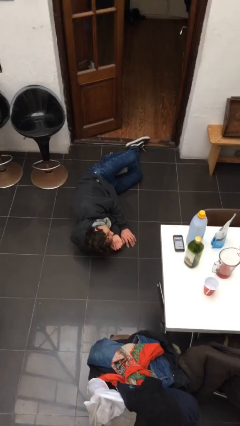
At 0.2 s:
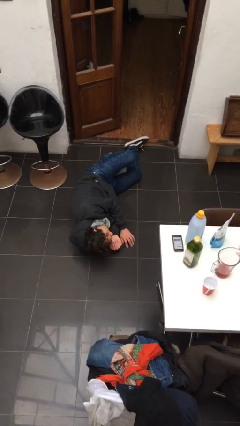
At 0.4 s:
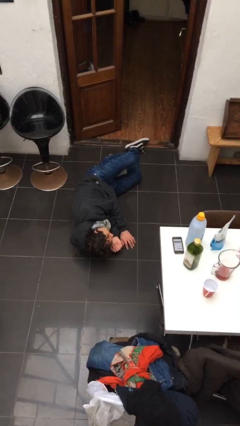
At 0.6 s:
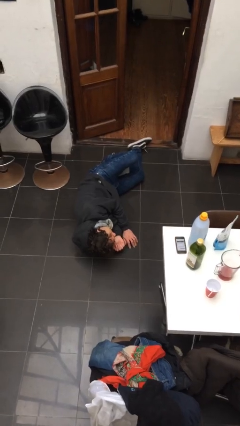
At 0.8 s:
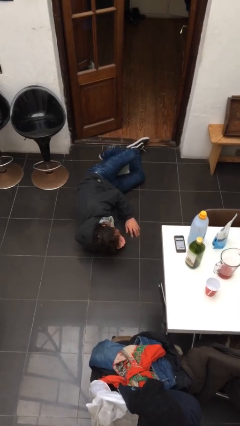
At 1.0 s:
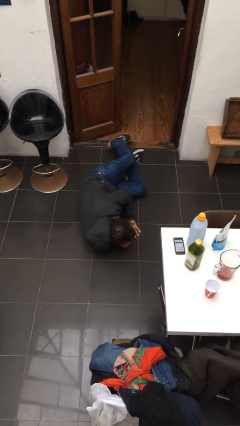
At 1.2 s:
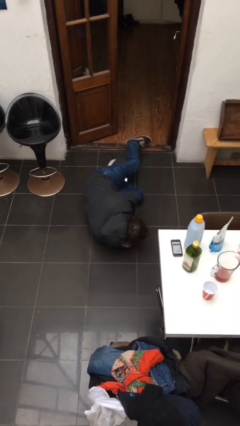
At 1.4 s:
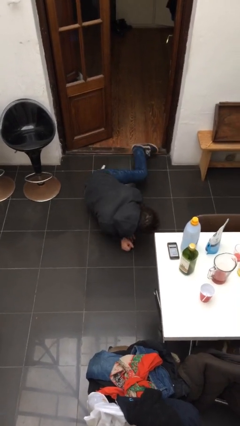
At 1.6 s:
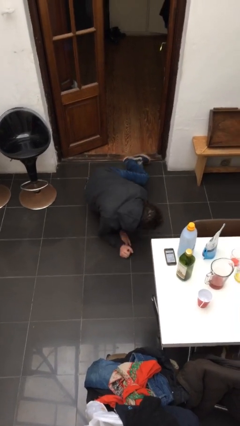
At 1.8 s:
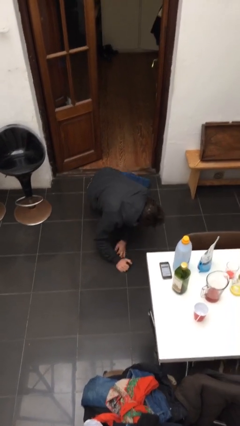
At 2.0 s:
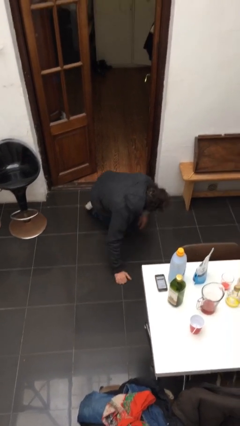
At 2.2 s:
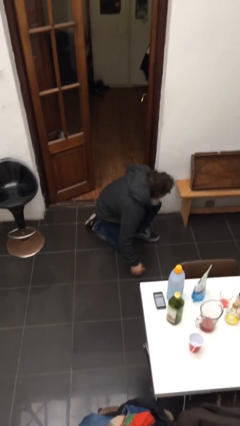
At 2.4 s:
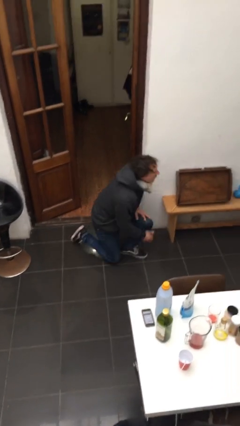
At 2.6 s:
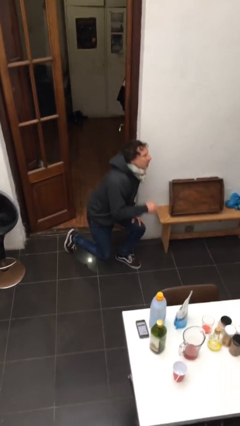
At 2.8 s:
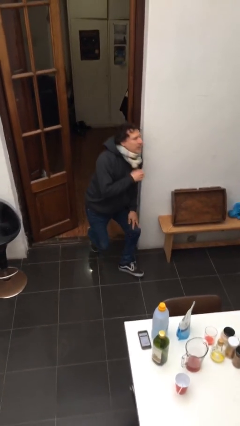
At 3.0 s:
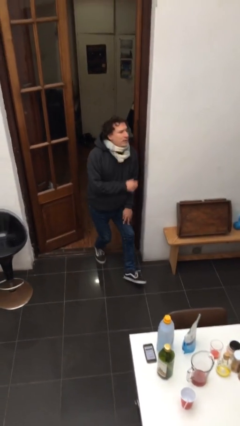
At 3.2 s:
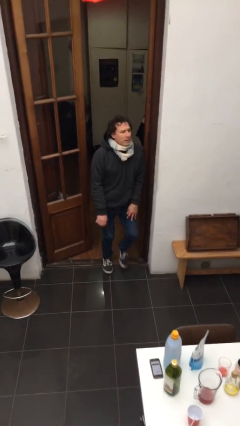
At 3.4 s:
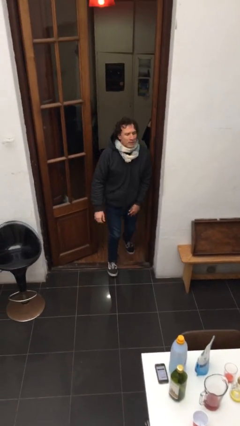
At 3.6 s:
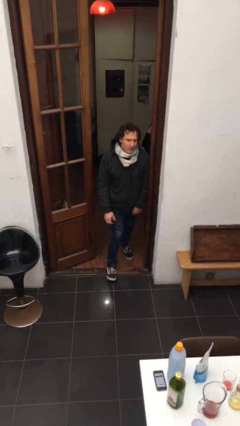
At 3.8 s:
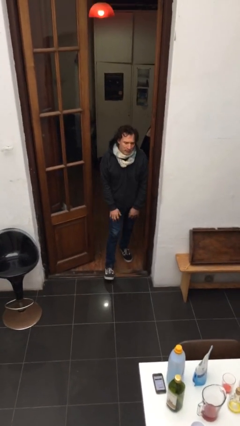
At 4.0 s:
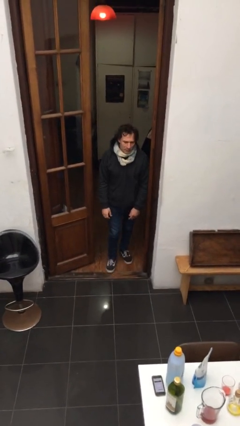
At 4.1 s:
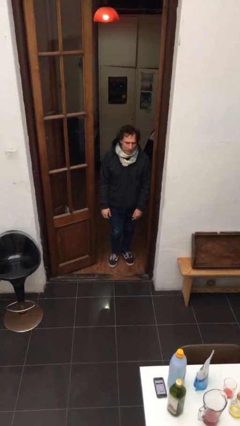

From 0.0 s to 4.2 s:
person stands up from floor

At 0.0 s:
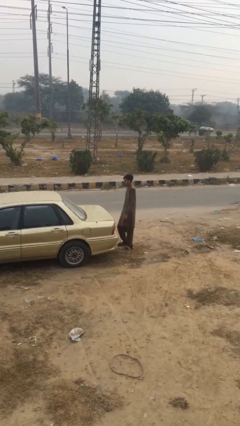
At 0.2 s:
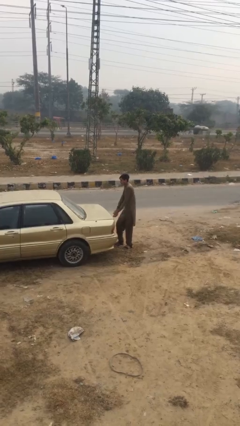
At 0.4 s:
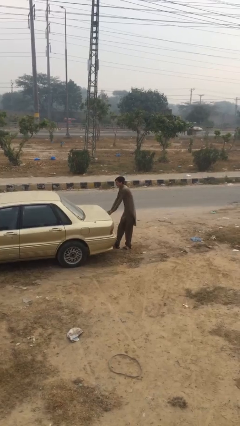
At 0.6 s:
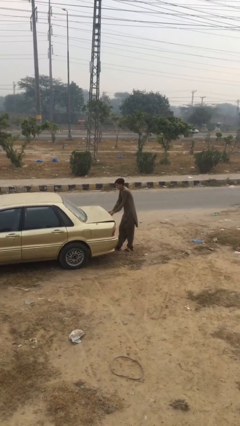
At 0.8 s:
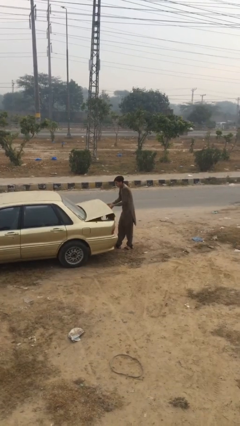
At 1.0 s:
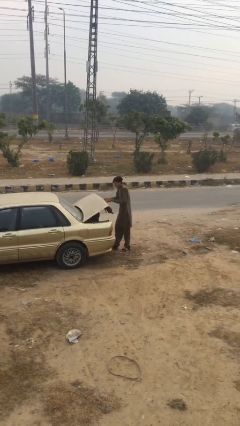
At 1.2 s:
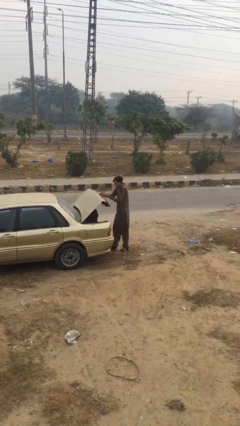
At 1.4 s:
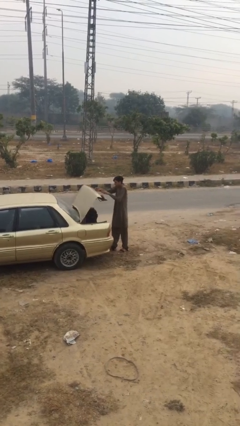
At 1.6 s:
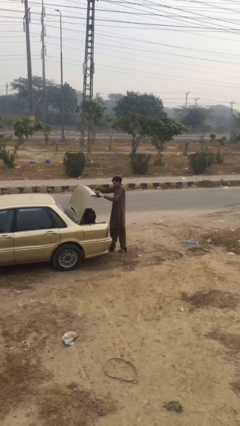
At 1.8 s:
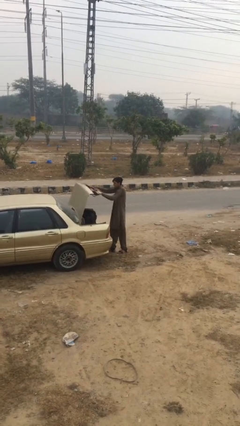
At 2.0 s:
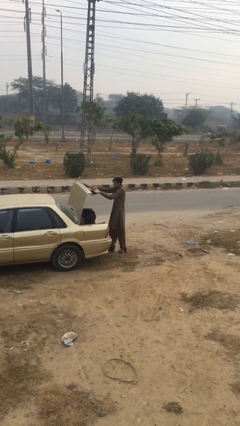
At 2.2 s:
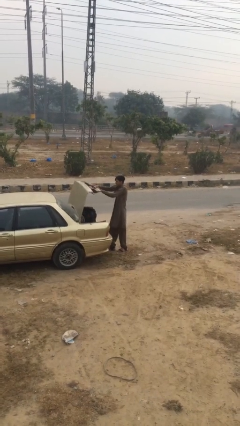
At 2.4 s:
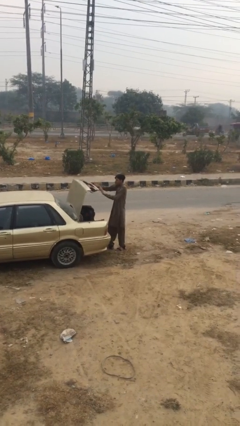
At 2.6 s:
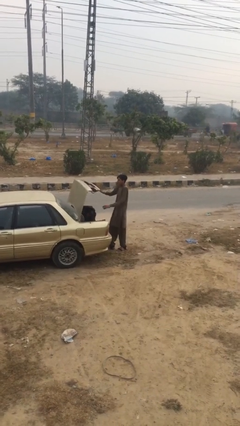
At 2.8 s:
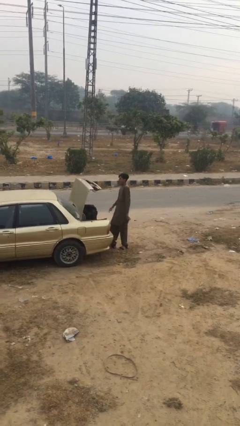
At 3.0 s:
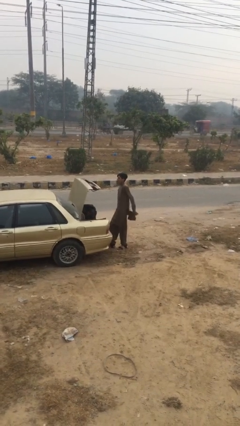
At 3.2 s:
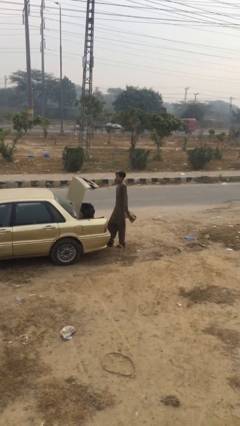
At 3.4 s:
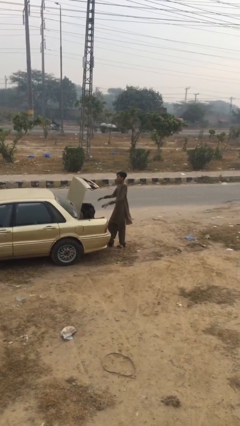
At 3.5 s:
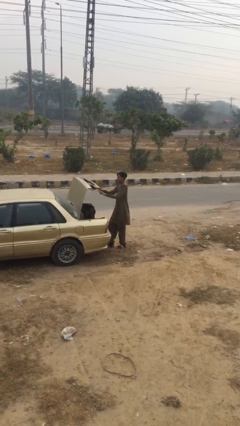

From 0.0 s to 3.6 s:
person opens car trunk

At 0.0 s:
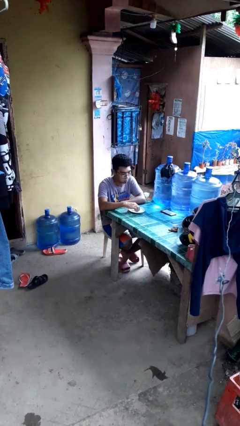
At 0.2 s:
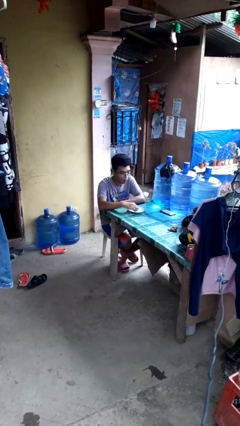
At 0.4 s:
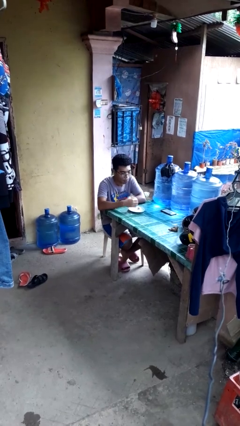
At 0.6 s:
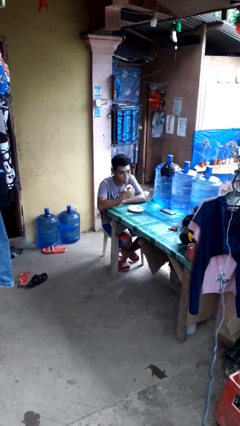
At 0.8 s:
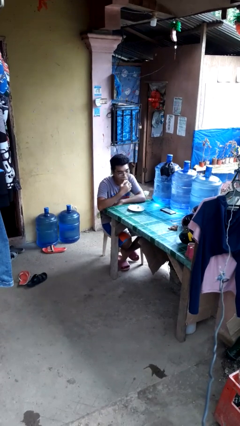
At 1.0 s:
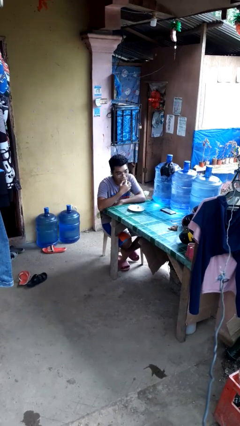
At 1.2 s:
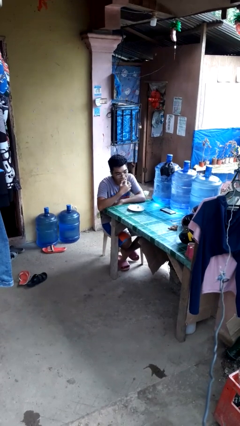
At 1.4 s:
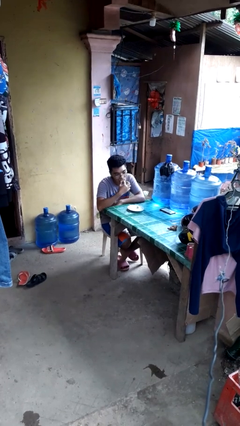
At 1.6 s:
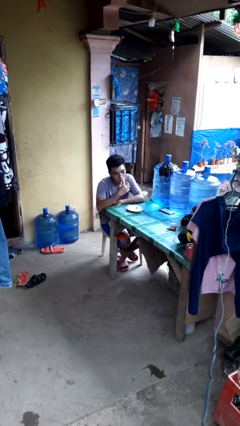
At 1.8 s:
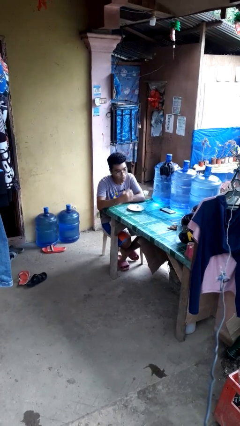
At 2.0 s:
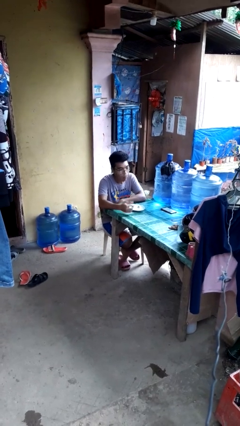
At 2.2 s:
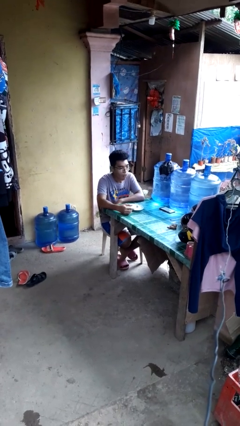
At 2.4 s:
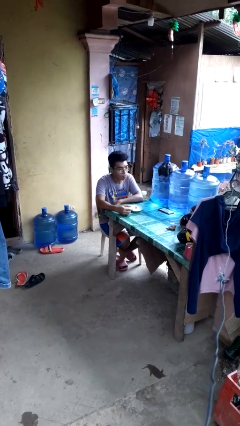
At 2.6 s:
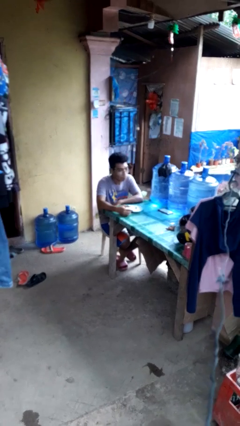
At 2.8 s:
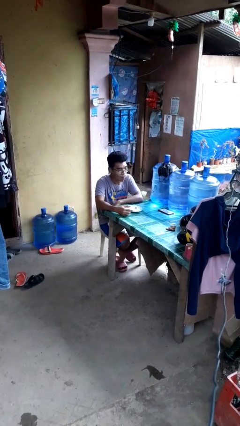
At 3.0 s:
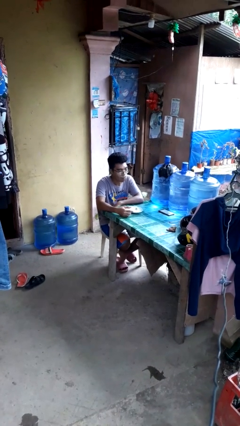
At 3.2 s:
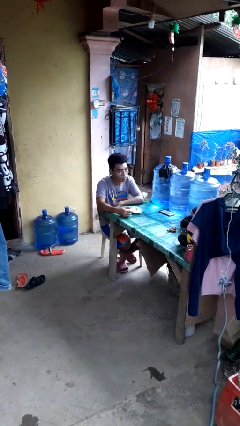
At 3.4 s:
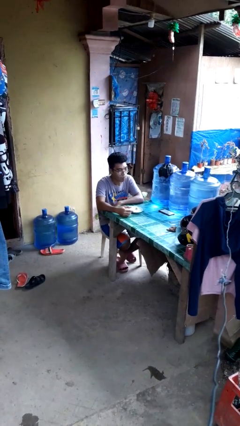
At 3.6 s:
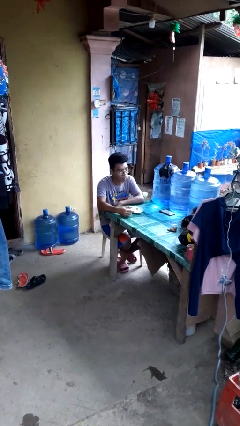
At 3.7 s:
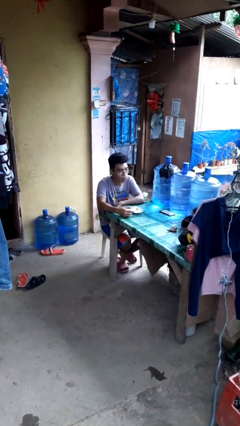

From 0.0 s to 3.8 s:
person eats with hands

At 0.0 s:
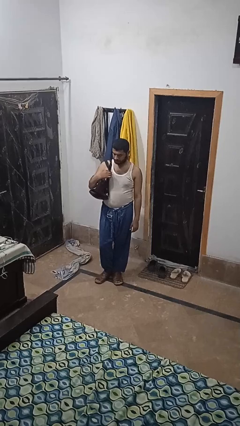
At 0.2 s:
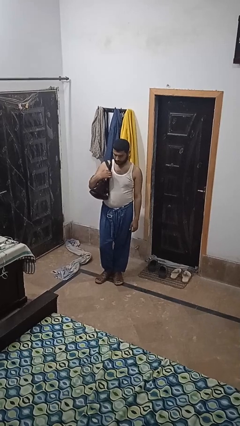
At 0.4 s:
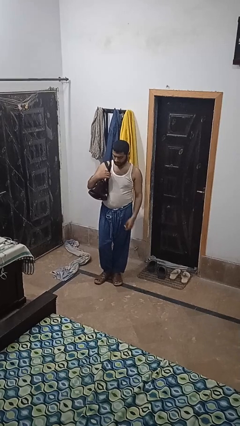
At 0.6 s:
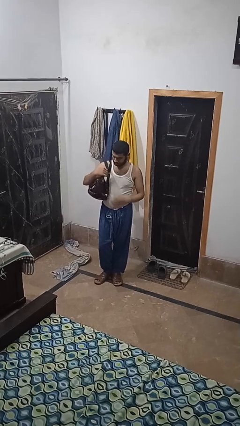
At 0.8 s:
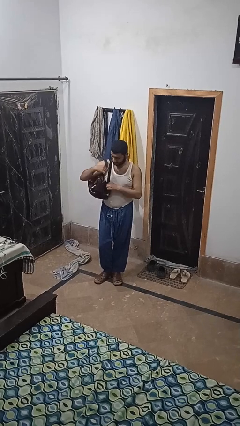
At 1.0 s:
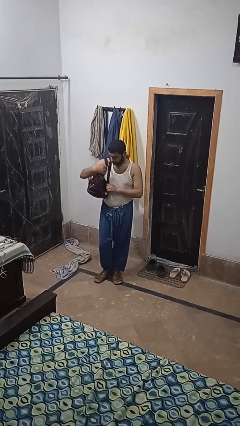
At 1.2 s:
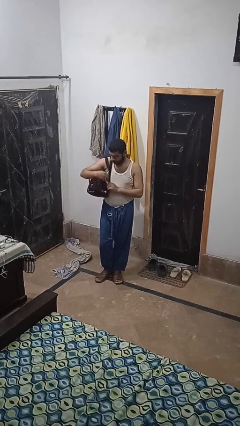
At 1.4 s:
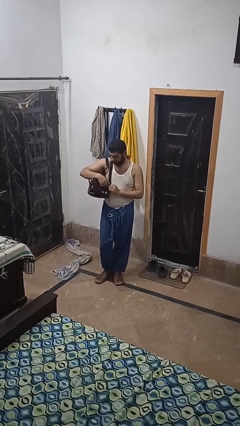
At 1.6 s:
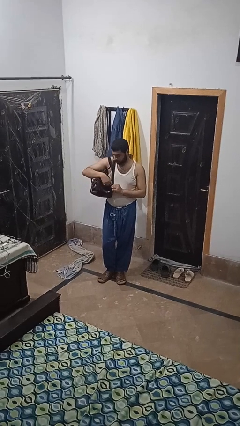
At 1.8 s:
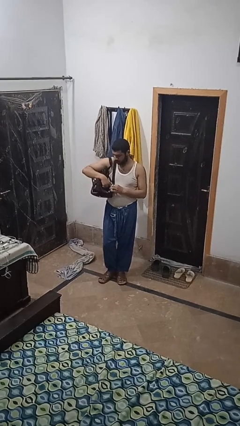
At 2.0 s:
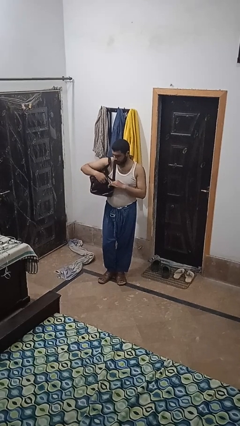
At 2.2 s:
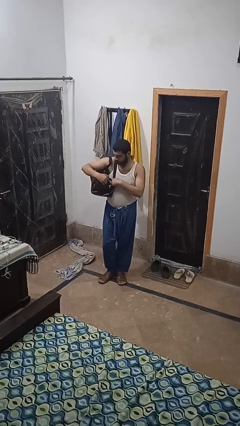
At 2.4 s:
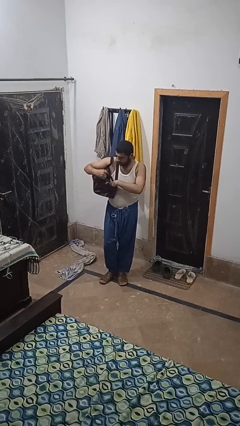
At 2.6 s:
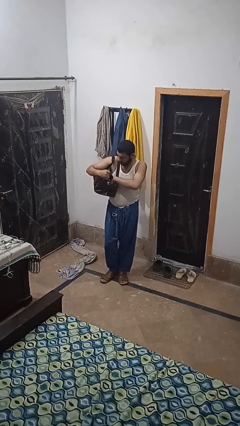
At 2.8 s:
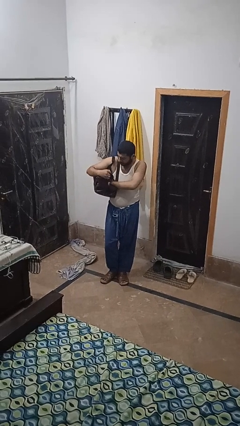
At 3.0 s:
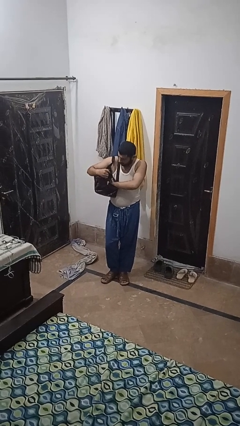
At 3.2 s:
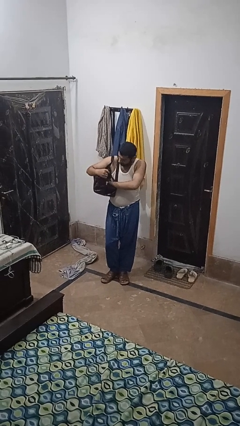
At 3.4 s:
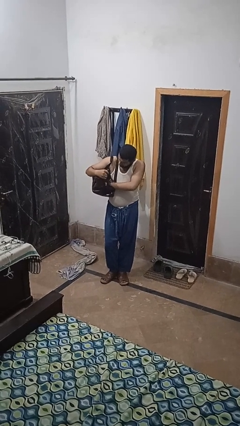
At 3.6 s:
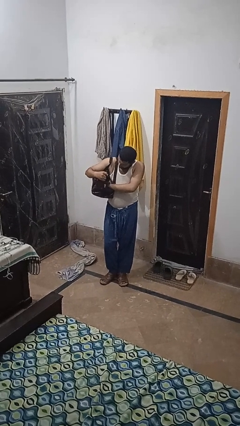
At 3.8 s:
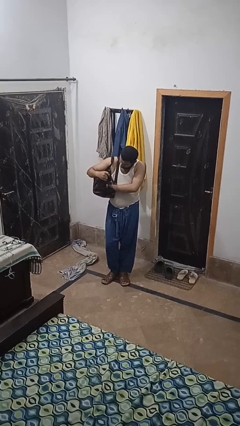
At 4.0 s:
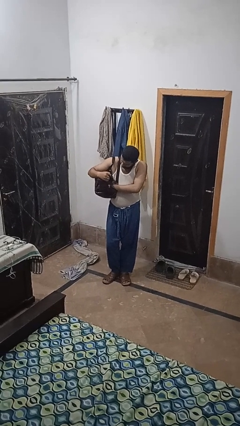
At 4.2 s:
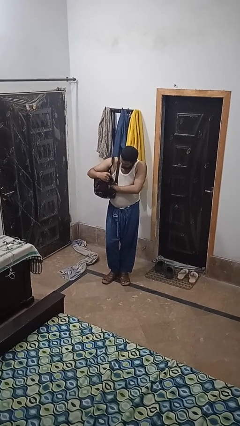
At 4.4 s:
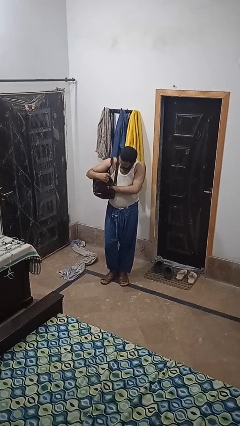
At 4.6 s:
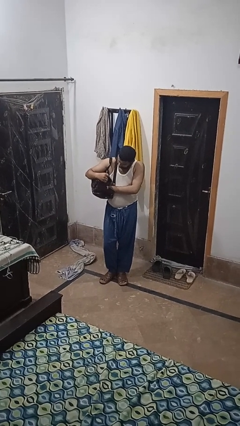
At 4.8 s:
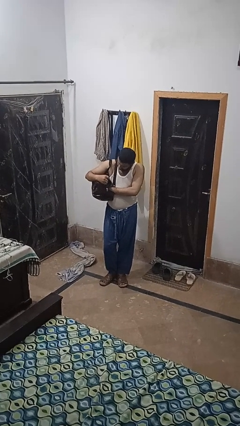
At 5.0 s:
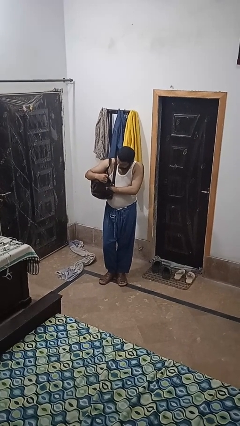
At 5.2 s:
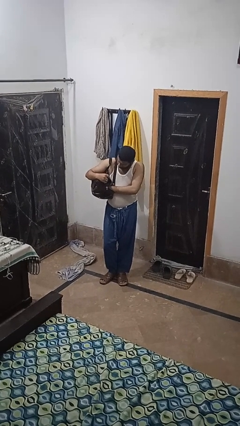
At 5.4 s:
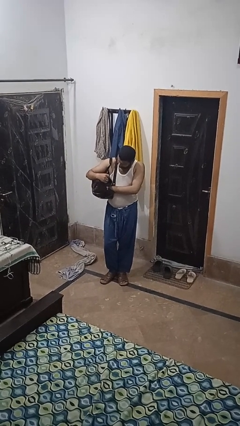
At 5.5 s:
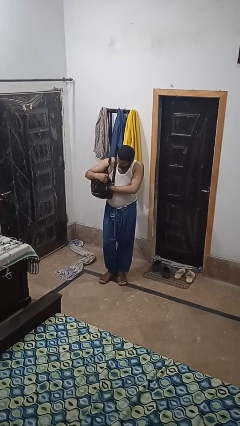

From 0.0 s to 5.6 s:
person searches in purse

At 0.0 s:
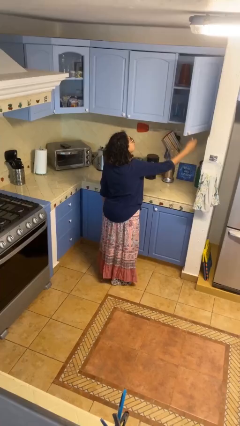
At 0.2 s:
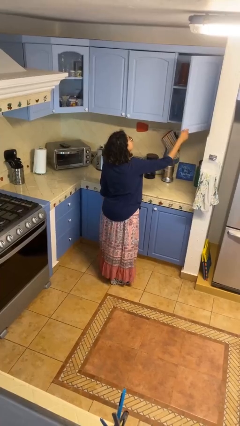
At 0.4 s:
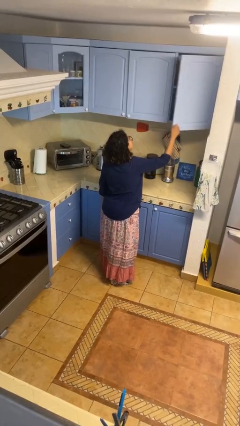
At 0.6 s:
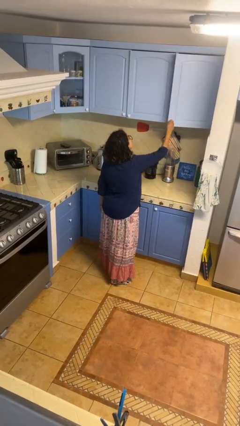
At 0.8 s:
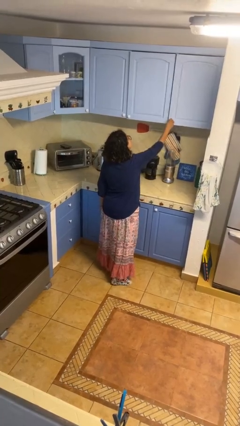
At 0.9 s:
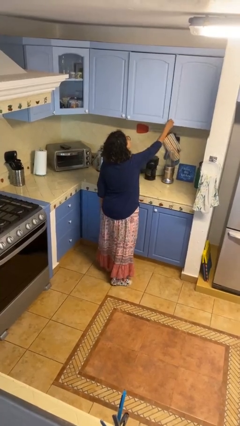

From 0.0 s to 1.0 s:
person closes cabinet
